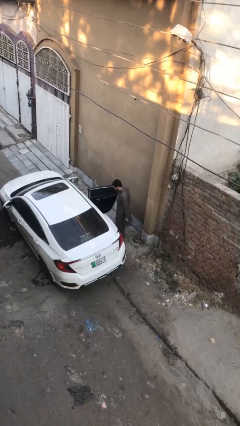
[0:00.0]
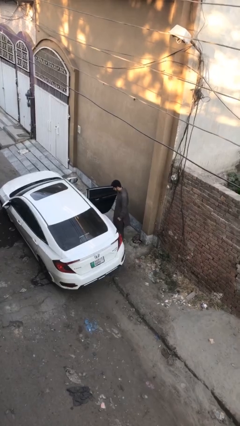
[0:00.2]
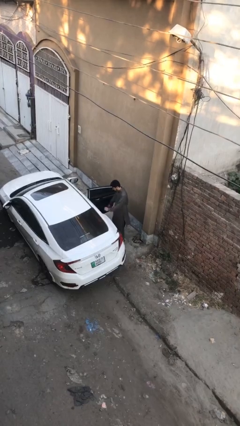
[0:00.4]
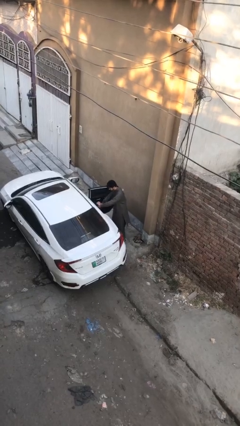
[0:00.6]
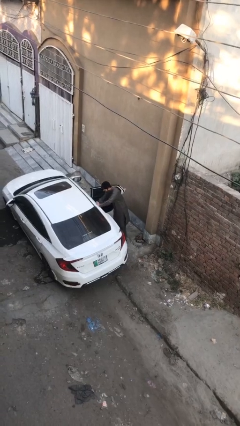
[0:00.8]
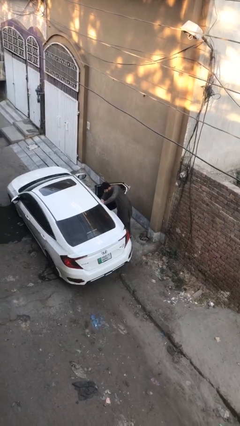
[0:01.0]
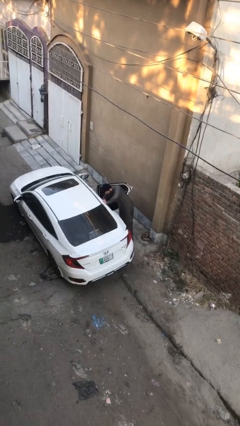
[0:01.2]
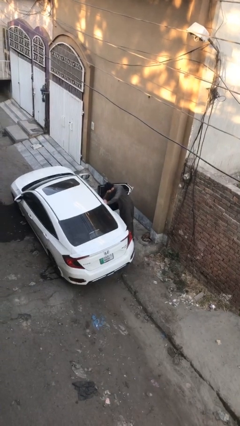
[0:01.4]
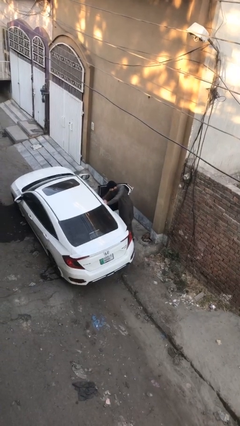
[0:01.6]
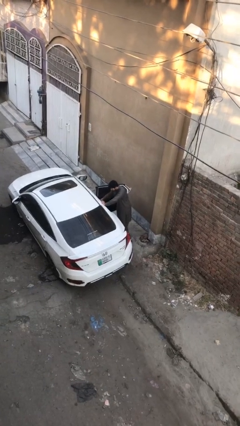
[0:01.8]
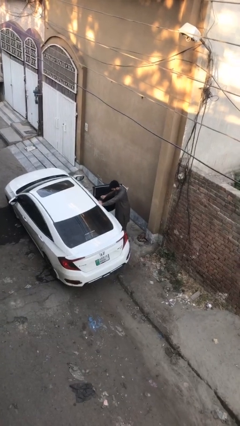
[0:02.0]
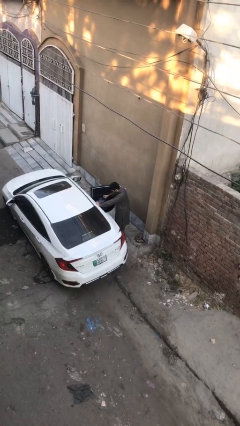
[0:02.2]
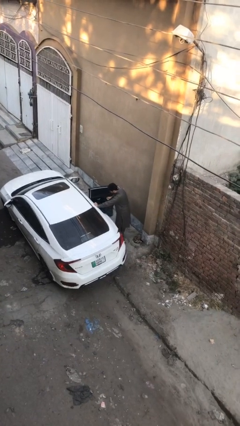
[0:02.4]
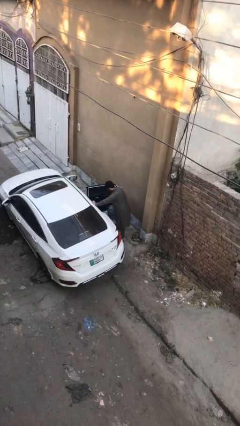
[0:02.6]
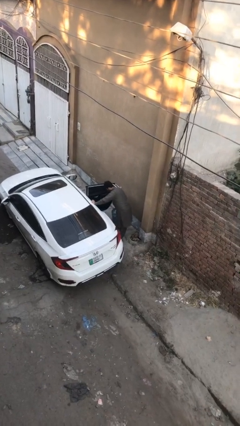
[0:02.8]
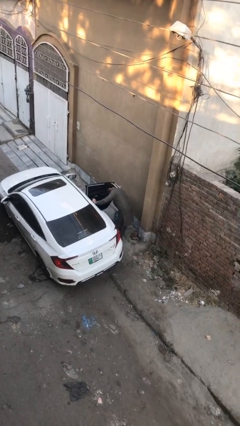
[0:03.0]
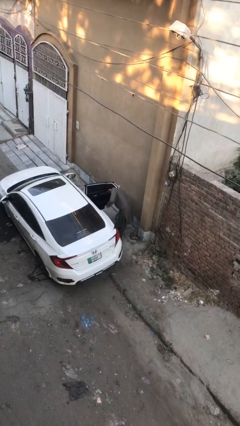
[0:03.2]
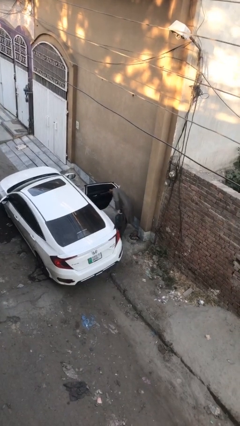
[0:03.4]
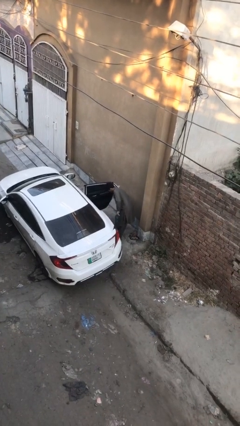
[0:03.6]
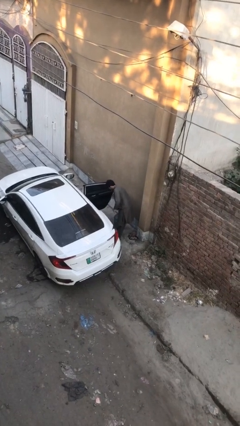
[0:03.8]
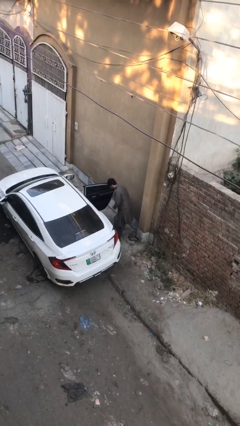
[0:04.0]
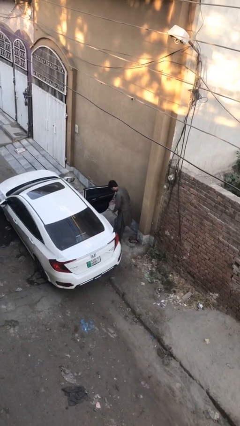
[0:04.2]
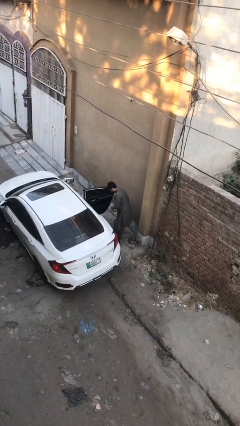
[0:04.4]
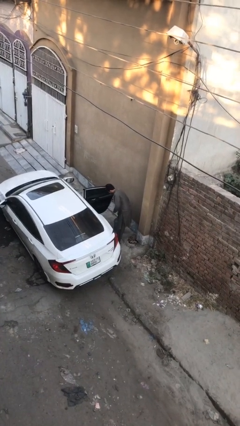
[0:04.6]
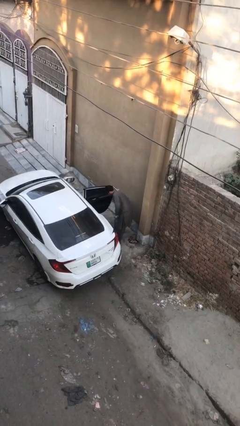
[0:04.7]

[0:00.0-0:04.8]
person unloads car

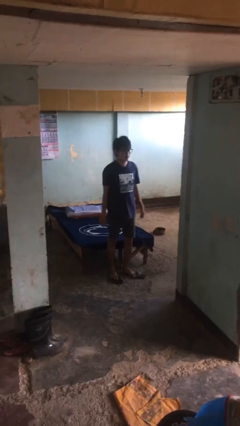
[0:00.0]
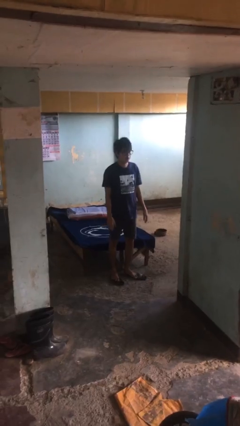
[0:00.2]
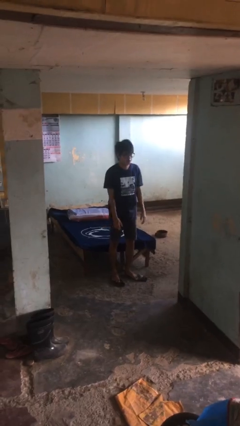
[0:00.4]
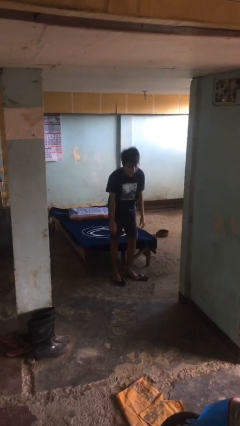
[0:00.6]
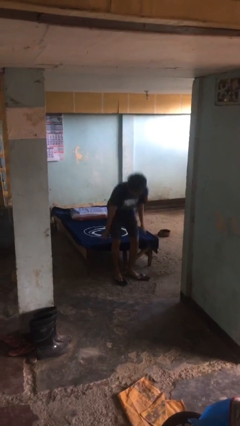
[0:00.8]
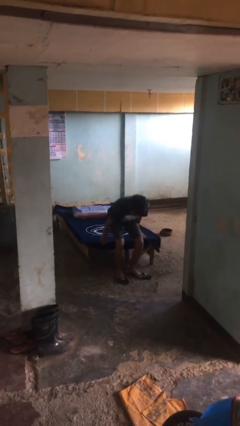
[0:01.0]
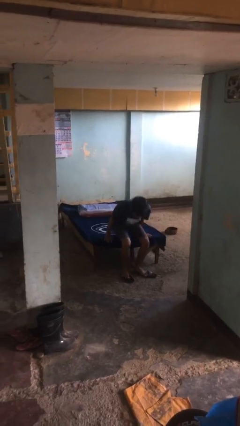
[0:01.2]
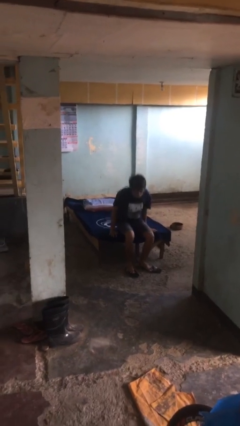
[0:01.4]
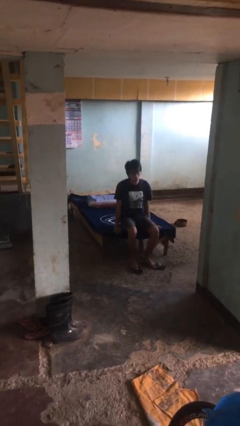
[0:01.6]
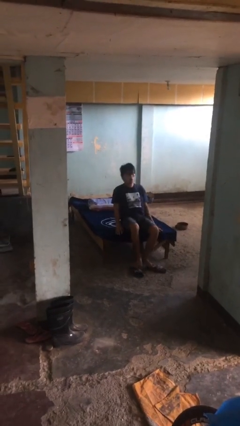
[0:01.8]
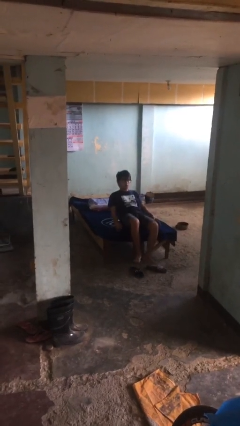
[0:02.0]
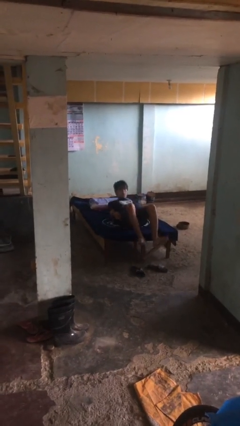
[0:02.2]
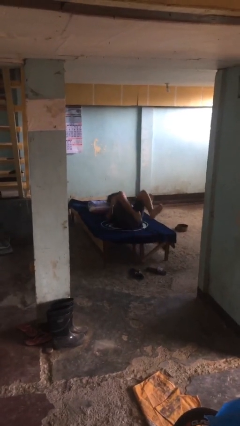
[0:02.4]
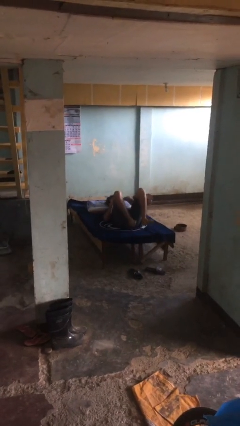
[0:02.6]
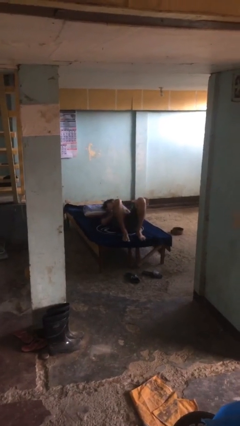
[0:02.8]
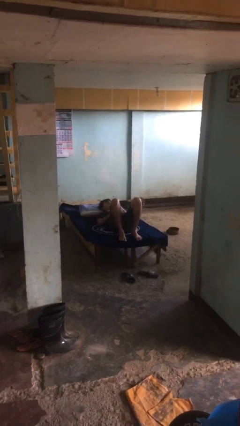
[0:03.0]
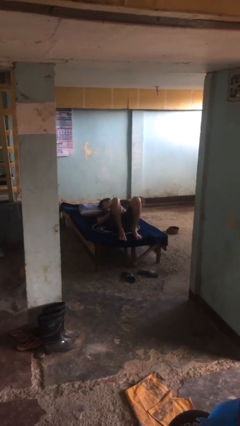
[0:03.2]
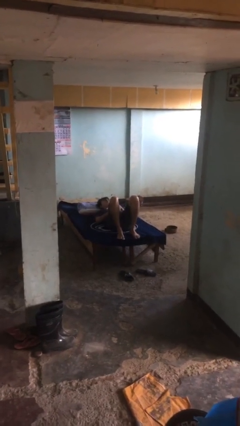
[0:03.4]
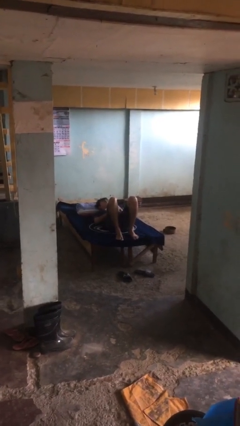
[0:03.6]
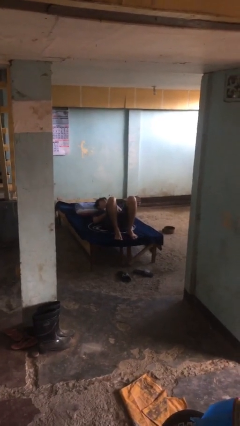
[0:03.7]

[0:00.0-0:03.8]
person lies down on bed

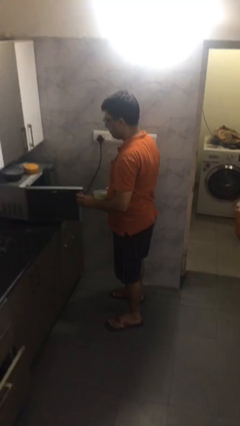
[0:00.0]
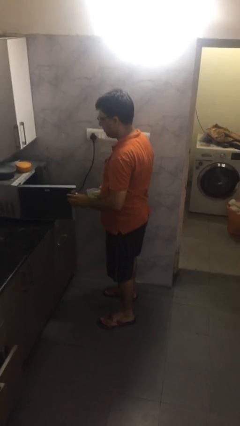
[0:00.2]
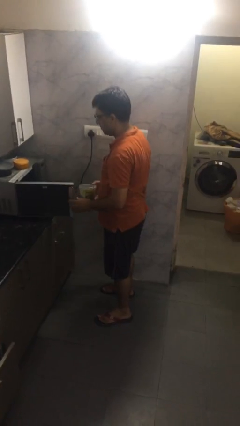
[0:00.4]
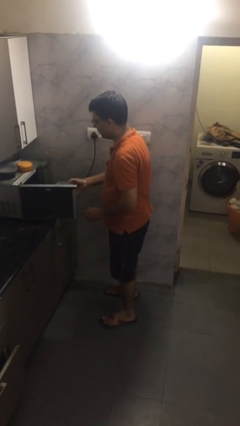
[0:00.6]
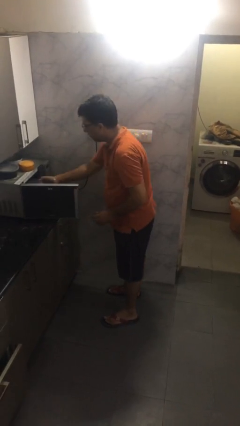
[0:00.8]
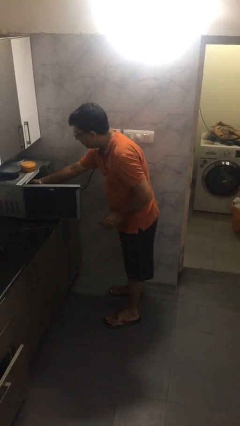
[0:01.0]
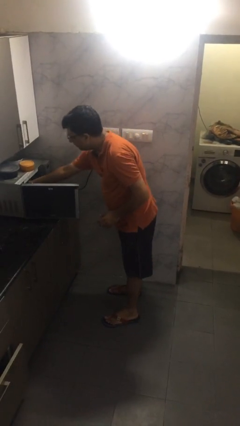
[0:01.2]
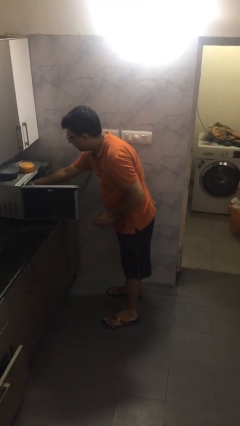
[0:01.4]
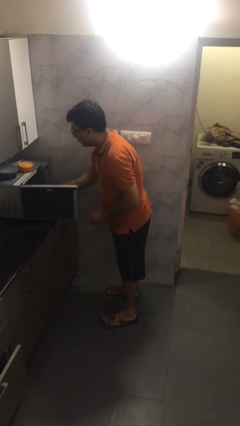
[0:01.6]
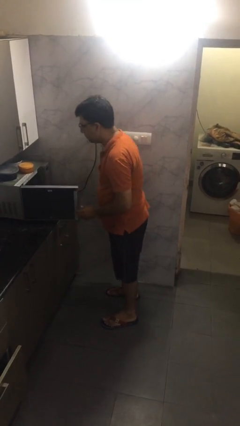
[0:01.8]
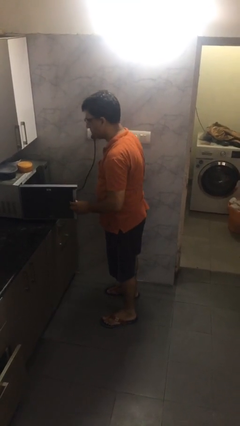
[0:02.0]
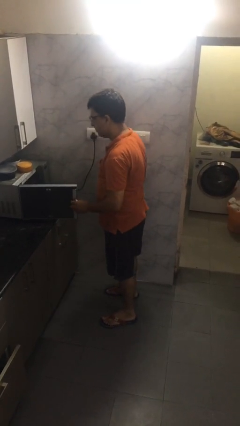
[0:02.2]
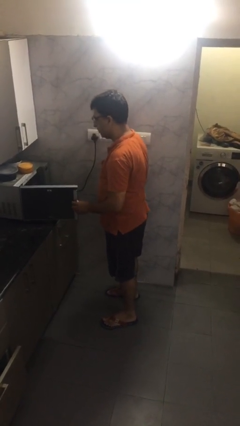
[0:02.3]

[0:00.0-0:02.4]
person puts object into microwave

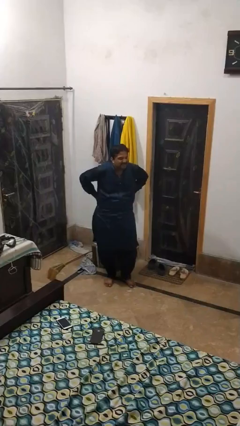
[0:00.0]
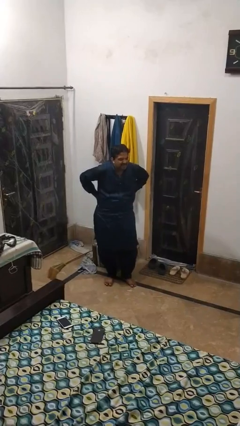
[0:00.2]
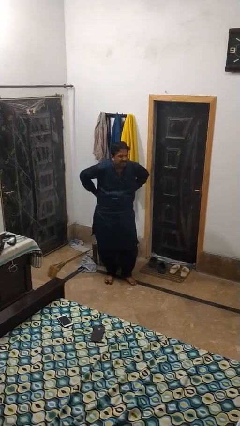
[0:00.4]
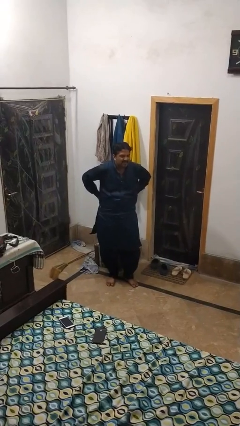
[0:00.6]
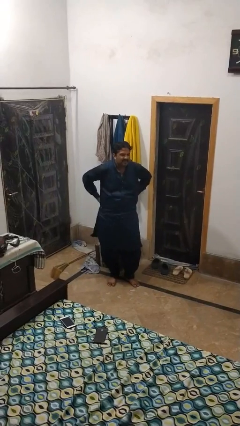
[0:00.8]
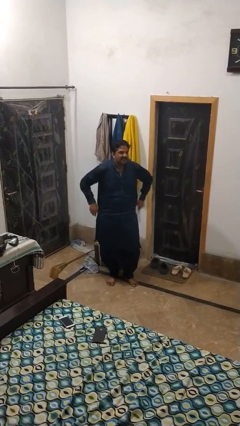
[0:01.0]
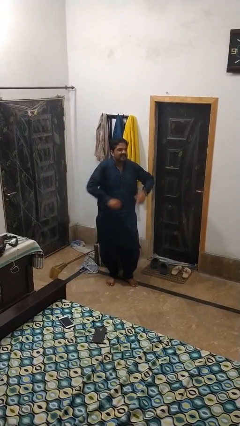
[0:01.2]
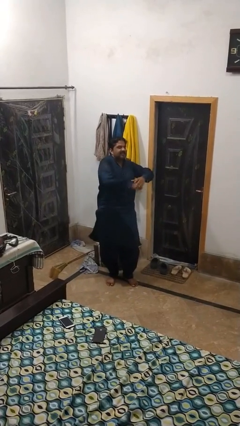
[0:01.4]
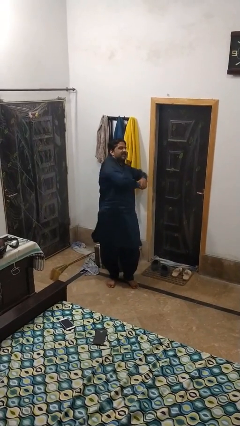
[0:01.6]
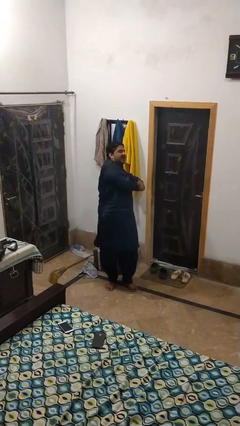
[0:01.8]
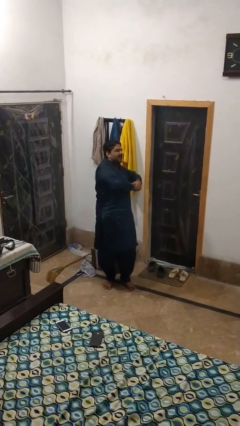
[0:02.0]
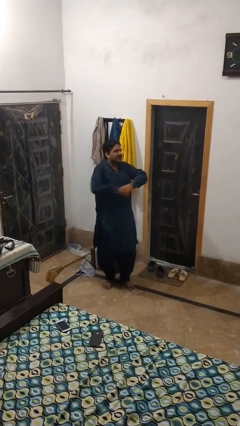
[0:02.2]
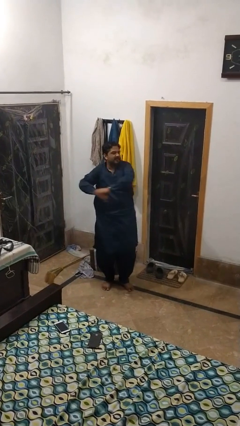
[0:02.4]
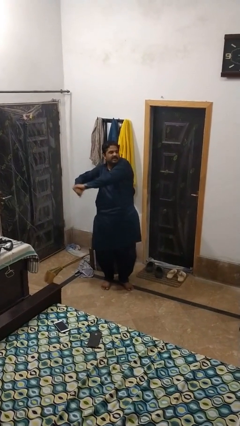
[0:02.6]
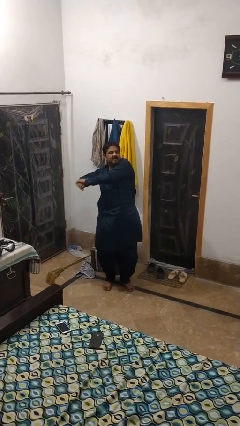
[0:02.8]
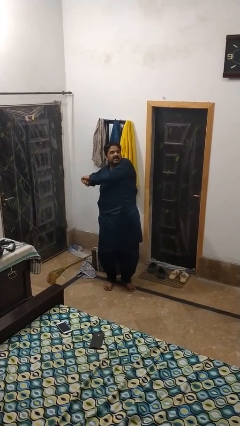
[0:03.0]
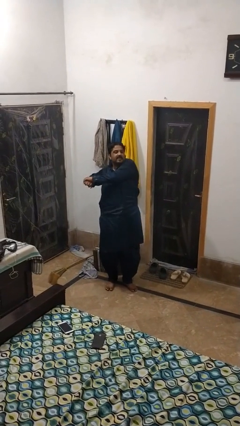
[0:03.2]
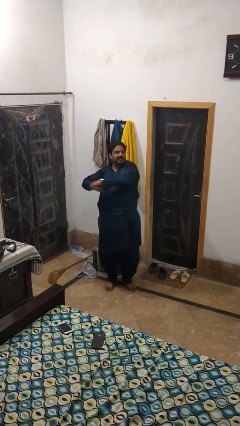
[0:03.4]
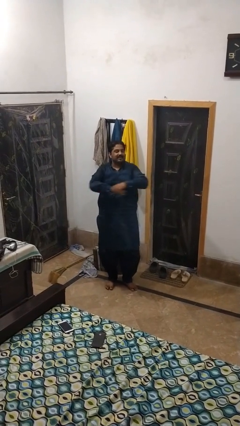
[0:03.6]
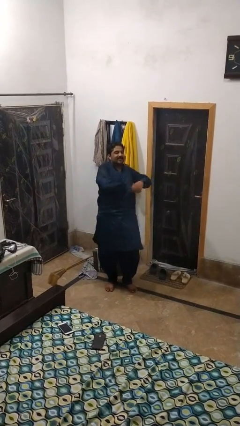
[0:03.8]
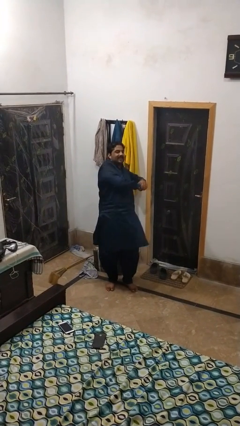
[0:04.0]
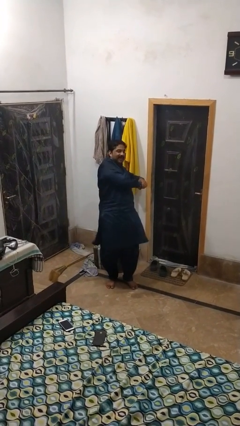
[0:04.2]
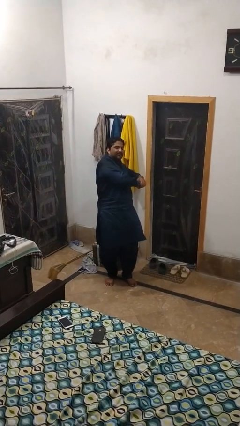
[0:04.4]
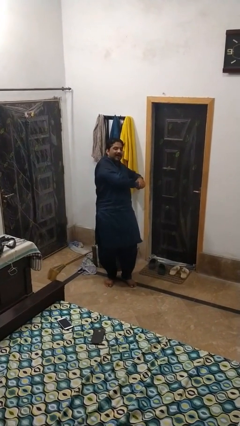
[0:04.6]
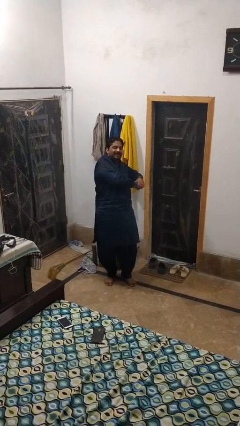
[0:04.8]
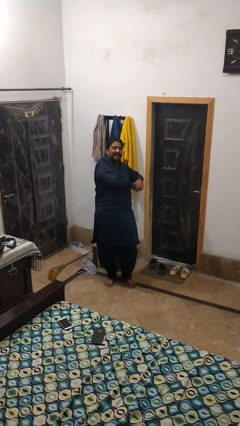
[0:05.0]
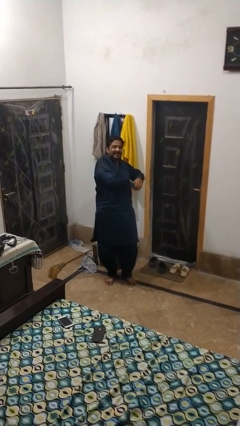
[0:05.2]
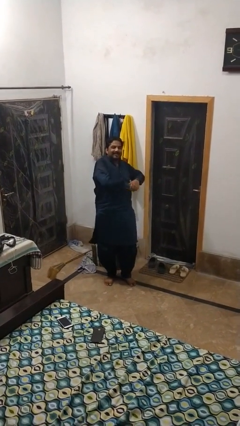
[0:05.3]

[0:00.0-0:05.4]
person stretches arms to side

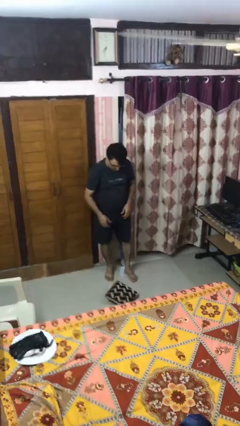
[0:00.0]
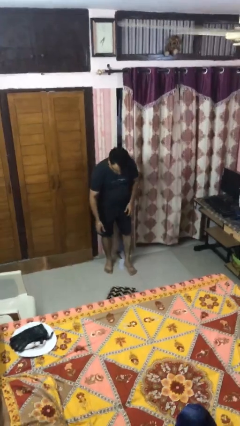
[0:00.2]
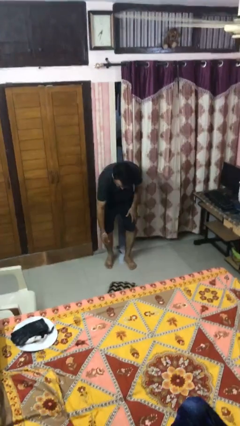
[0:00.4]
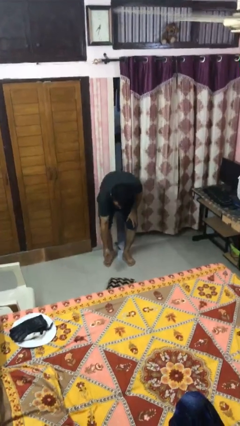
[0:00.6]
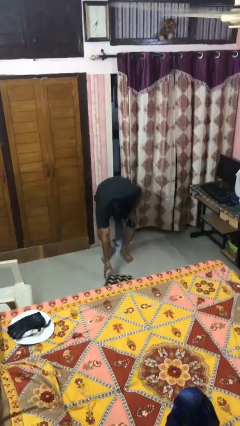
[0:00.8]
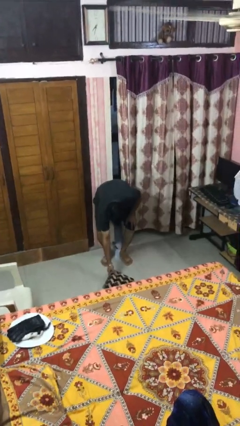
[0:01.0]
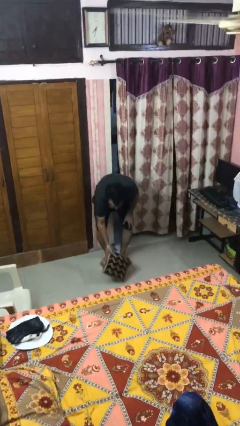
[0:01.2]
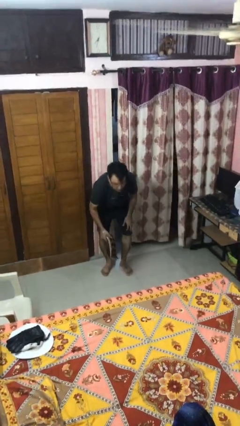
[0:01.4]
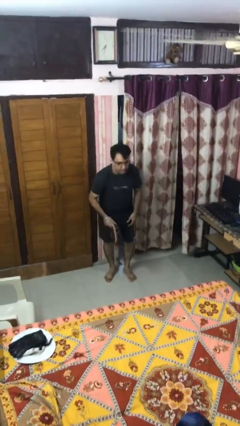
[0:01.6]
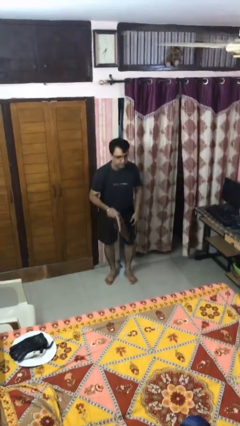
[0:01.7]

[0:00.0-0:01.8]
person picks up object from floor
